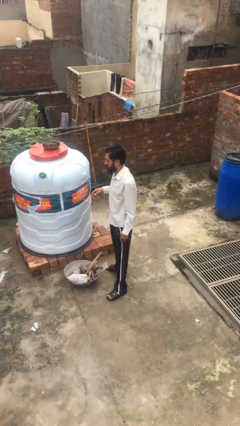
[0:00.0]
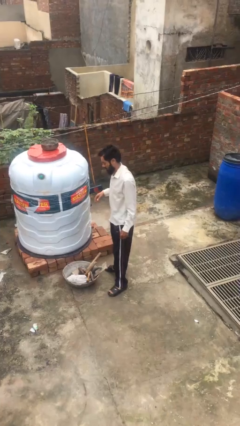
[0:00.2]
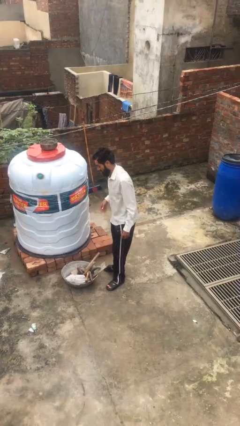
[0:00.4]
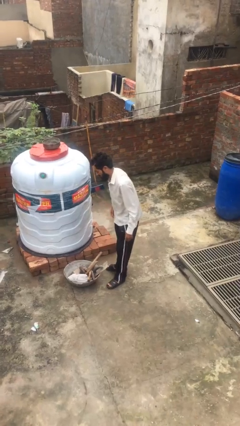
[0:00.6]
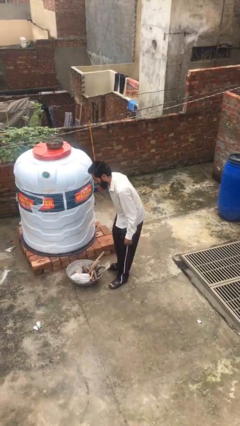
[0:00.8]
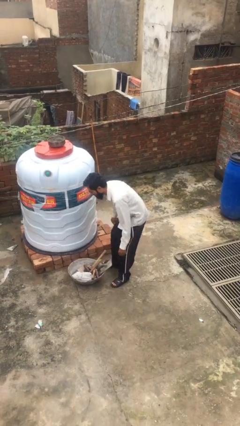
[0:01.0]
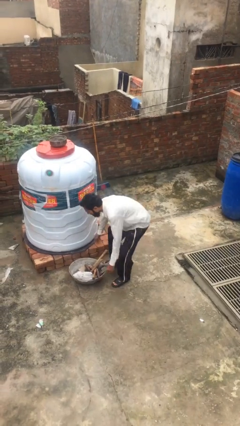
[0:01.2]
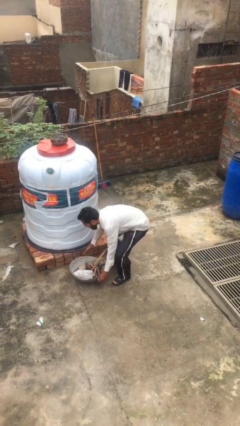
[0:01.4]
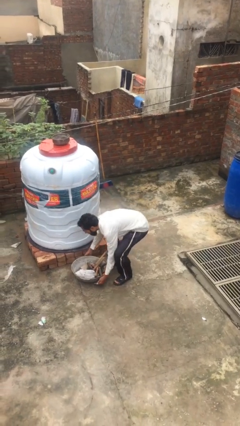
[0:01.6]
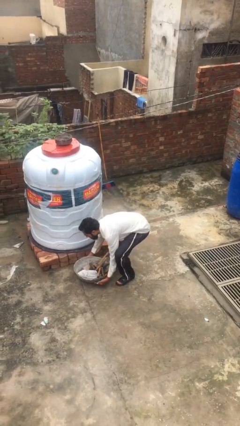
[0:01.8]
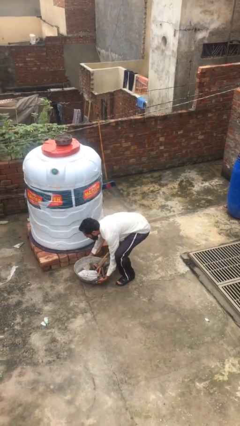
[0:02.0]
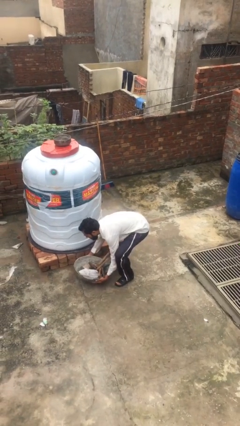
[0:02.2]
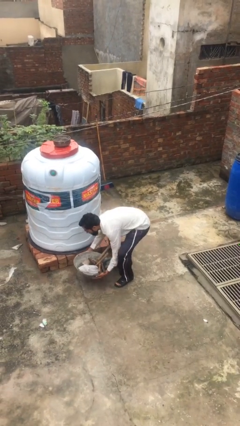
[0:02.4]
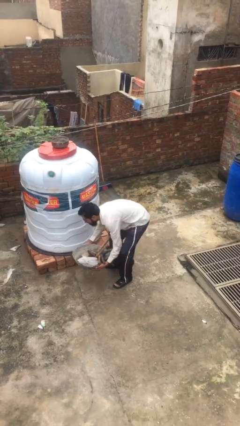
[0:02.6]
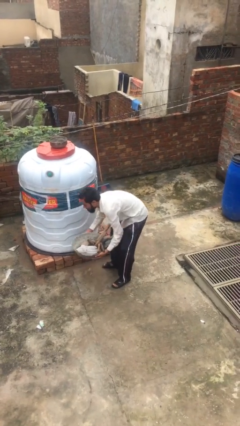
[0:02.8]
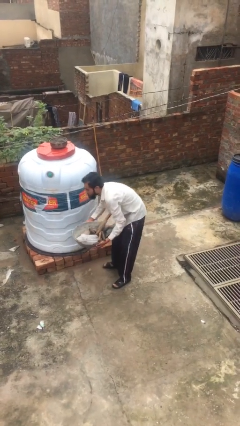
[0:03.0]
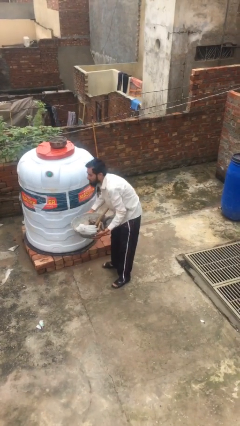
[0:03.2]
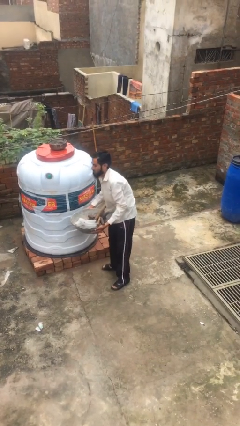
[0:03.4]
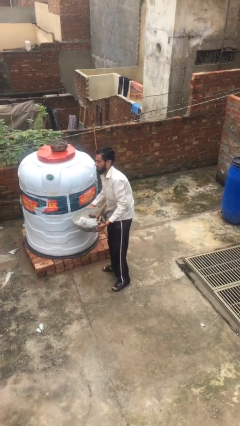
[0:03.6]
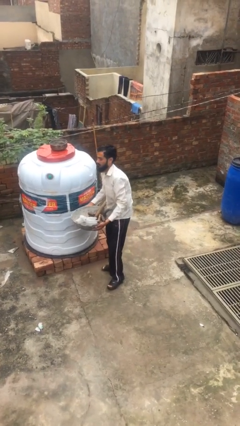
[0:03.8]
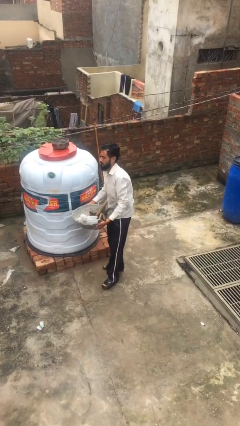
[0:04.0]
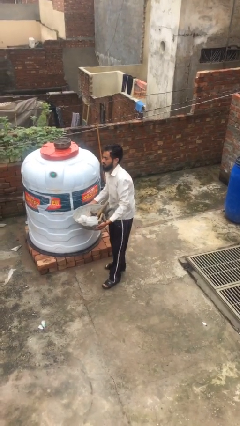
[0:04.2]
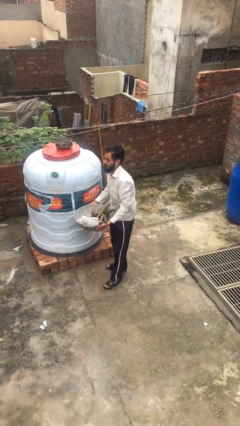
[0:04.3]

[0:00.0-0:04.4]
person picks up object from floor

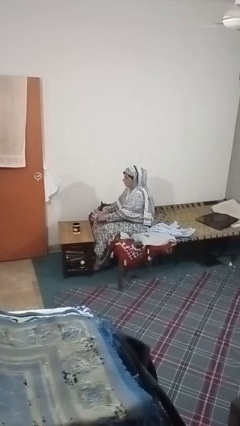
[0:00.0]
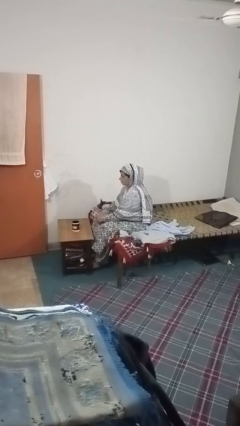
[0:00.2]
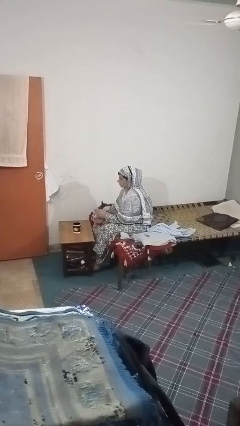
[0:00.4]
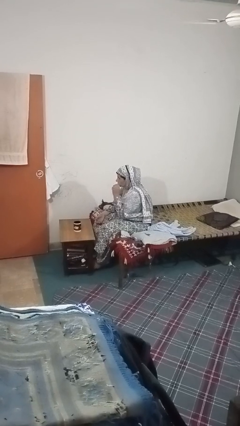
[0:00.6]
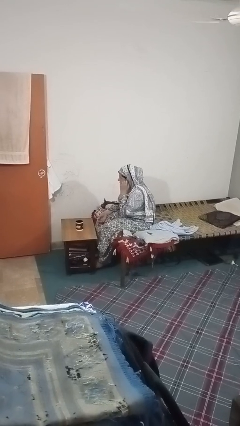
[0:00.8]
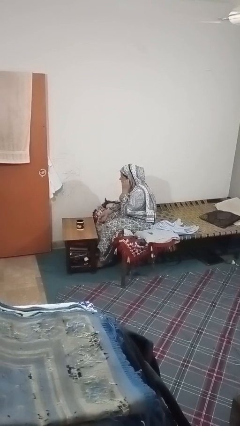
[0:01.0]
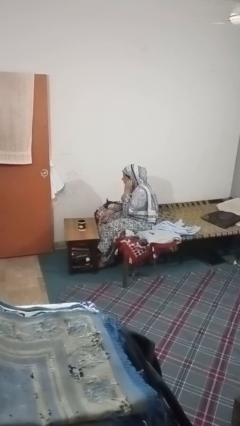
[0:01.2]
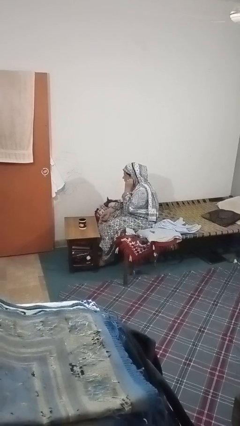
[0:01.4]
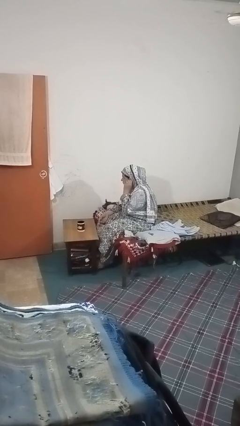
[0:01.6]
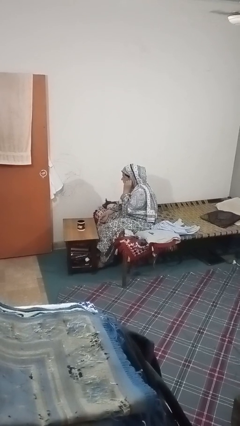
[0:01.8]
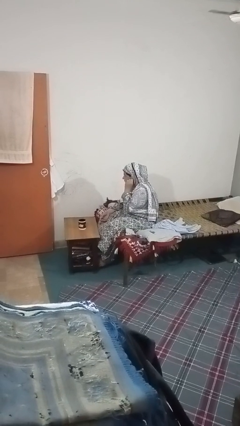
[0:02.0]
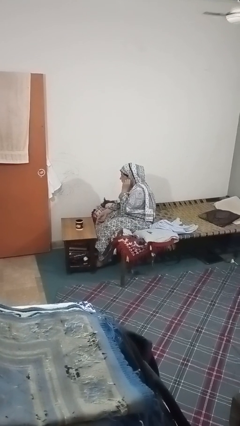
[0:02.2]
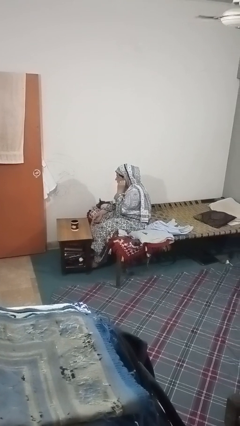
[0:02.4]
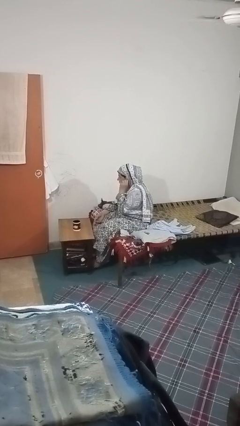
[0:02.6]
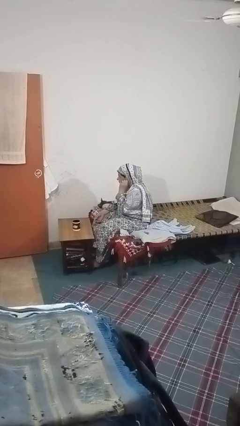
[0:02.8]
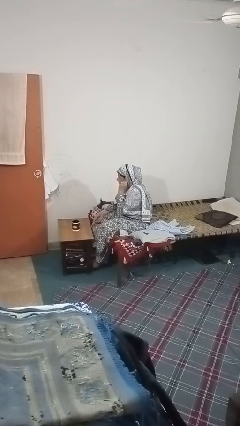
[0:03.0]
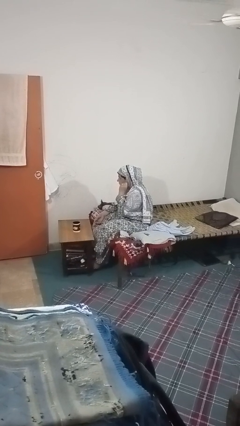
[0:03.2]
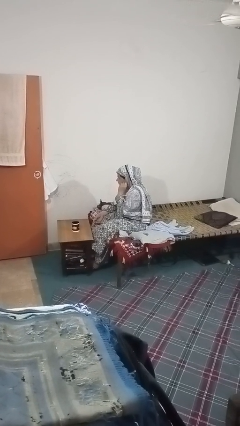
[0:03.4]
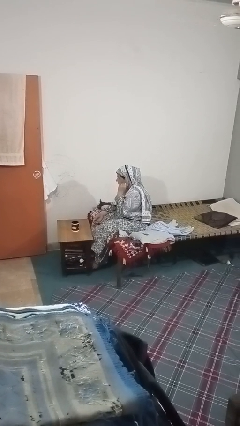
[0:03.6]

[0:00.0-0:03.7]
person touches earlobe

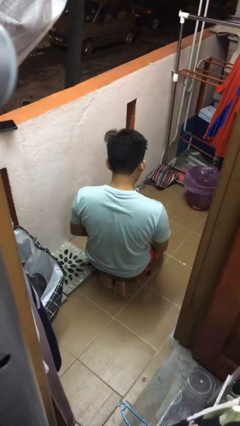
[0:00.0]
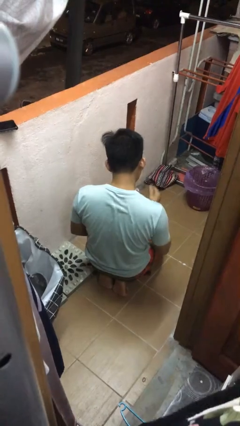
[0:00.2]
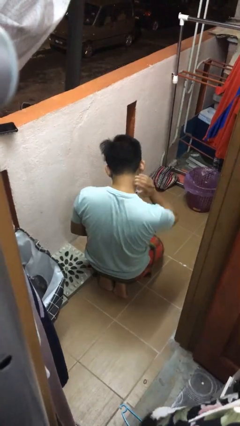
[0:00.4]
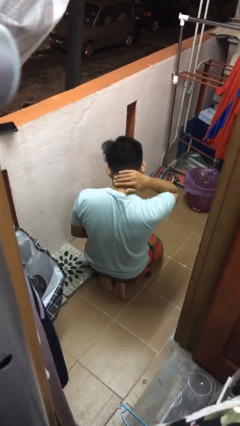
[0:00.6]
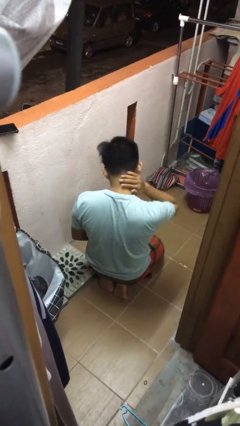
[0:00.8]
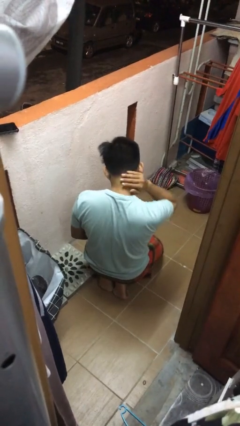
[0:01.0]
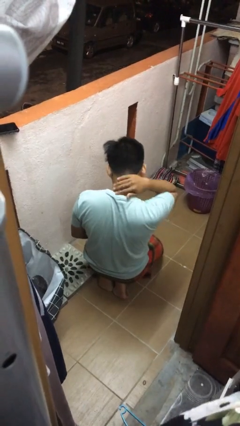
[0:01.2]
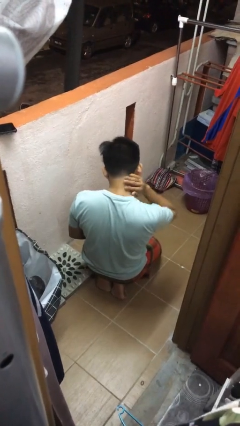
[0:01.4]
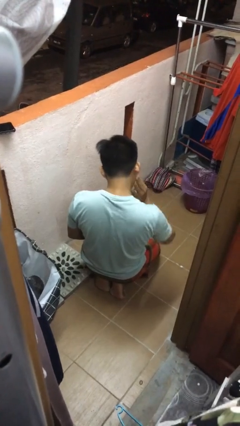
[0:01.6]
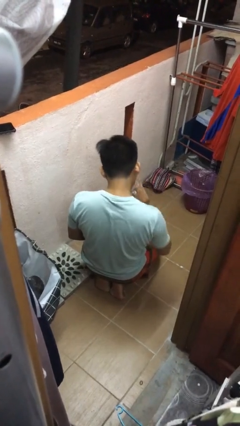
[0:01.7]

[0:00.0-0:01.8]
person rubs neck

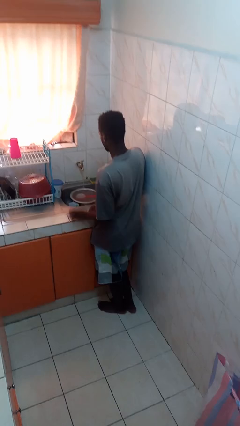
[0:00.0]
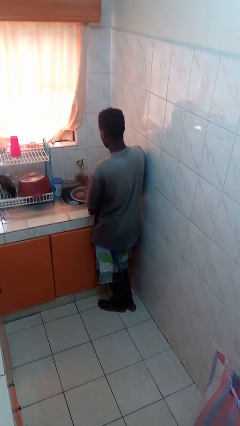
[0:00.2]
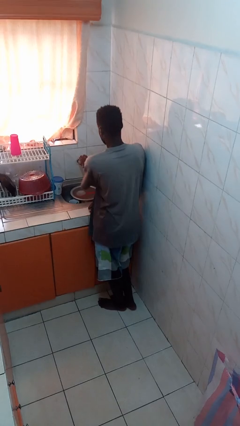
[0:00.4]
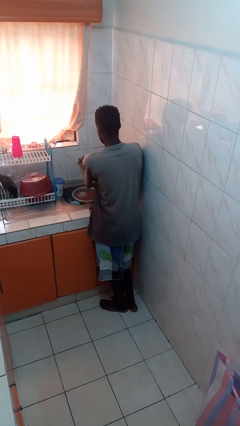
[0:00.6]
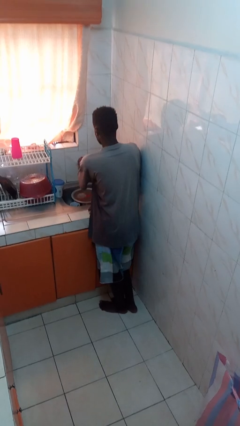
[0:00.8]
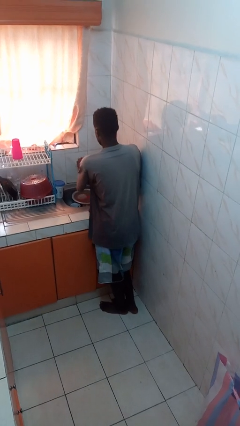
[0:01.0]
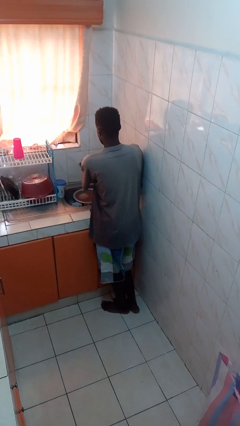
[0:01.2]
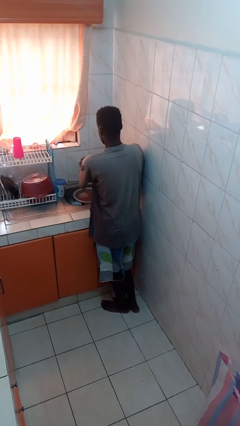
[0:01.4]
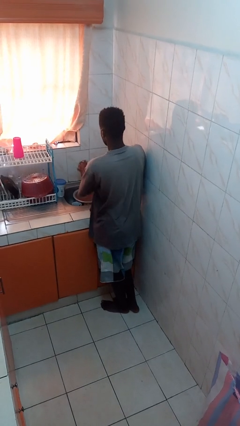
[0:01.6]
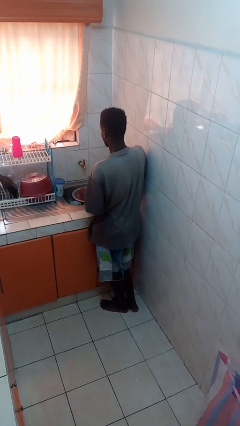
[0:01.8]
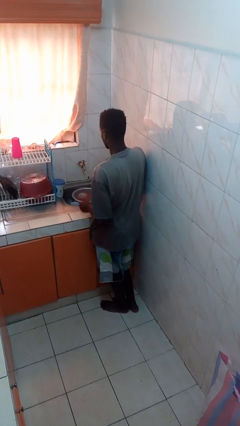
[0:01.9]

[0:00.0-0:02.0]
person turns off faucet

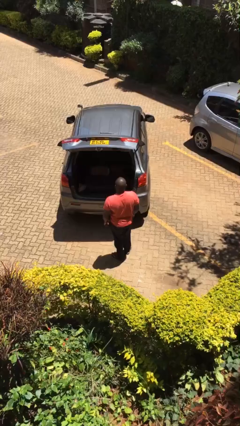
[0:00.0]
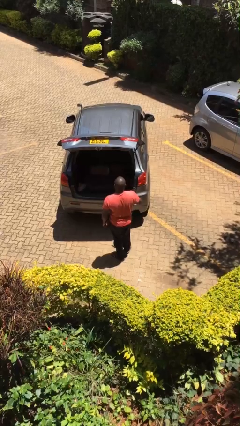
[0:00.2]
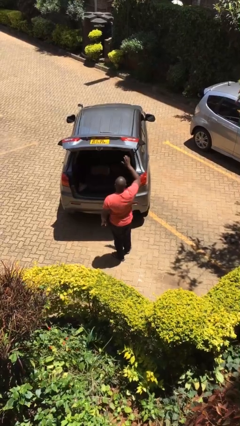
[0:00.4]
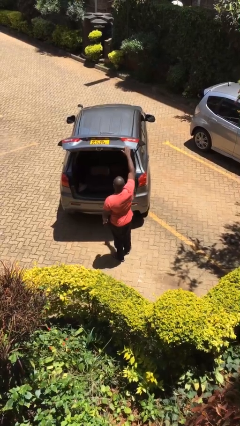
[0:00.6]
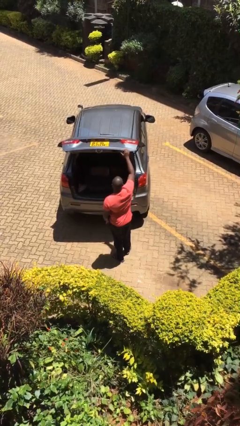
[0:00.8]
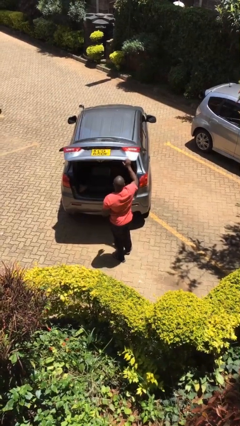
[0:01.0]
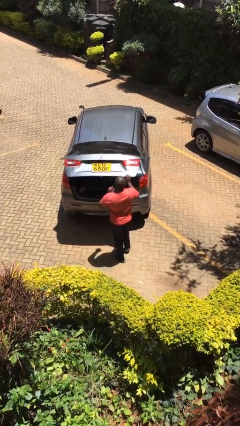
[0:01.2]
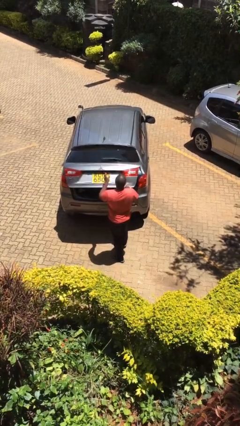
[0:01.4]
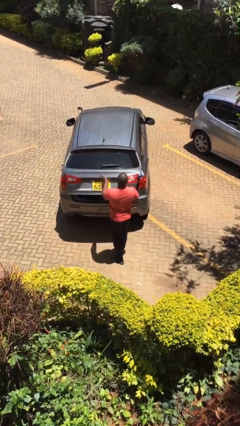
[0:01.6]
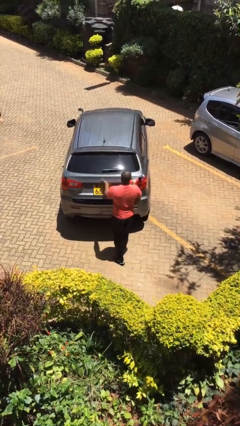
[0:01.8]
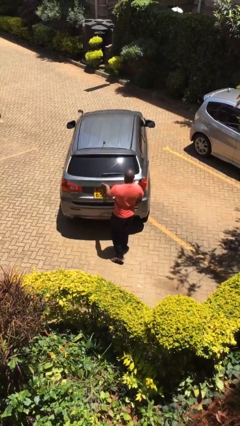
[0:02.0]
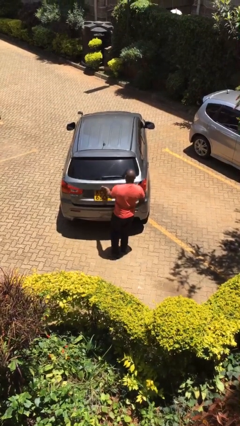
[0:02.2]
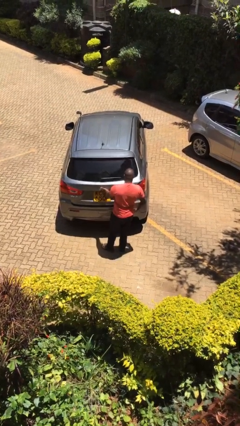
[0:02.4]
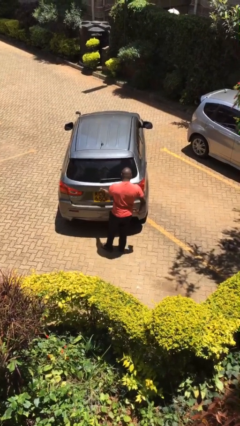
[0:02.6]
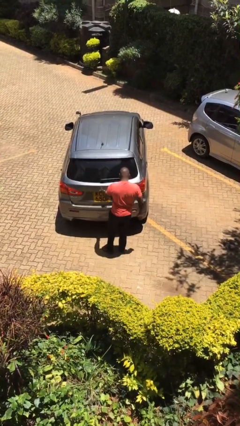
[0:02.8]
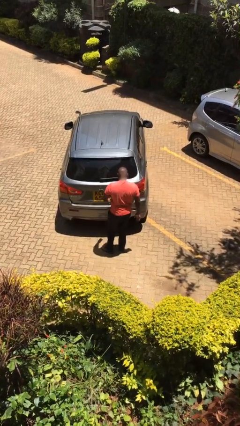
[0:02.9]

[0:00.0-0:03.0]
person closes car trunk

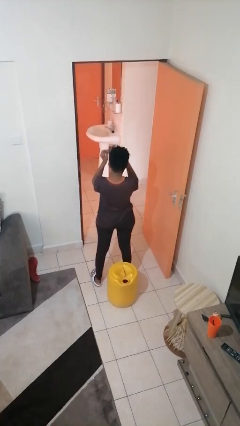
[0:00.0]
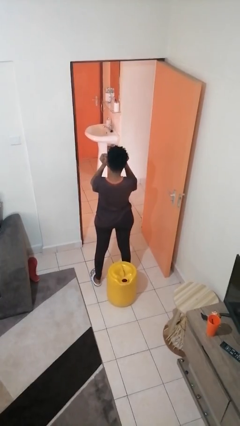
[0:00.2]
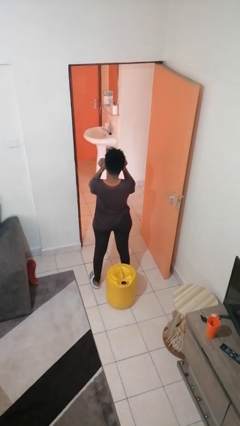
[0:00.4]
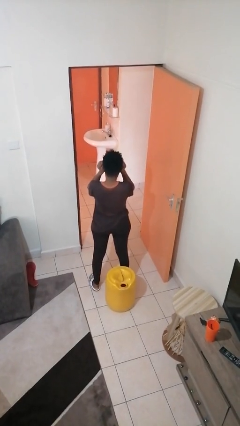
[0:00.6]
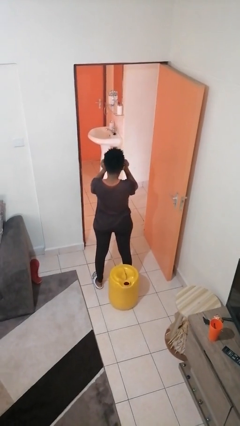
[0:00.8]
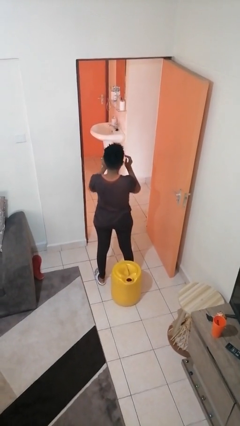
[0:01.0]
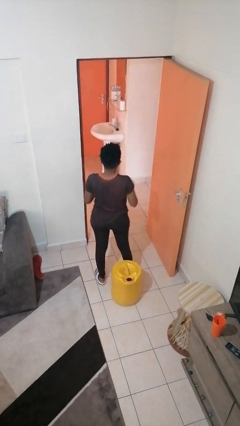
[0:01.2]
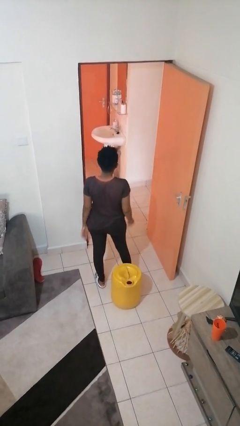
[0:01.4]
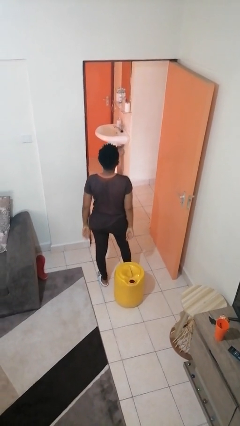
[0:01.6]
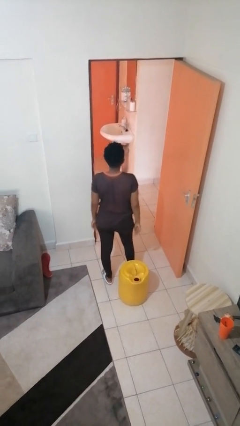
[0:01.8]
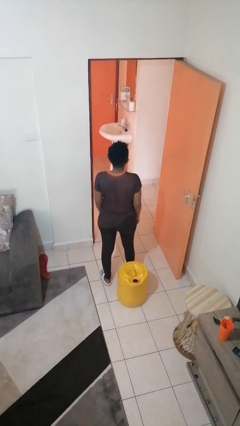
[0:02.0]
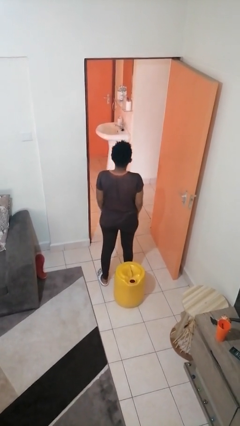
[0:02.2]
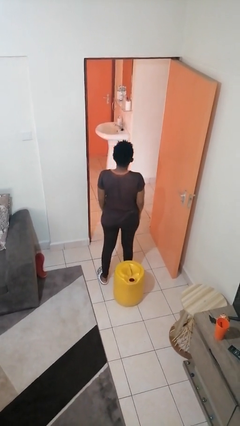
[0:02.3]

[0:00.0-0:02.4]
person puts on glasses
